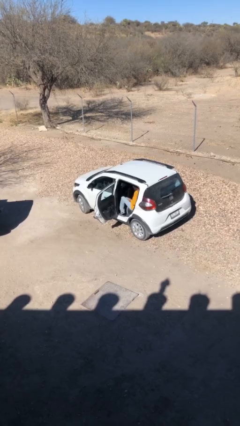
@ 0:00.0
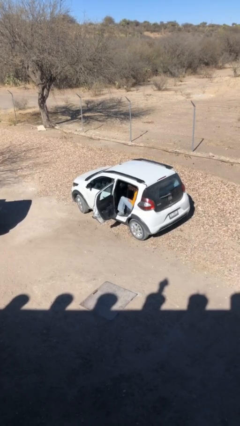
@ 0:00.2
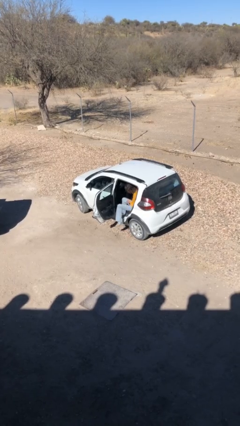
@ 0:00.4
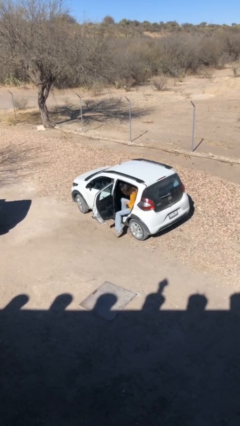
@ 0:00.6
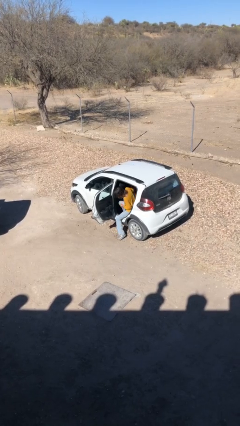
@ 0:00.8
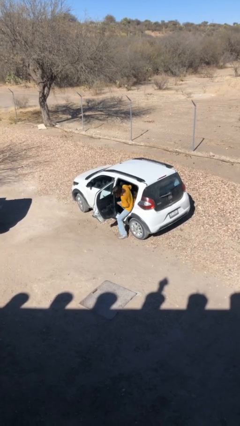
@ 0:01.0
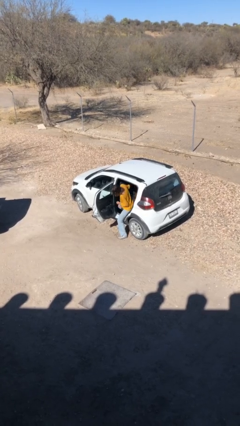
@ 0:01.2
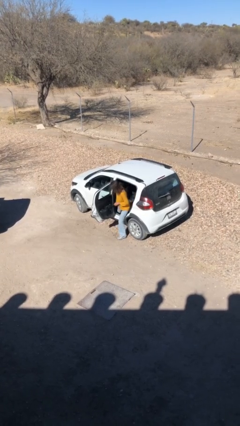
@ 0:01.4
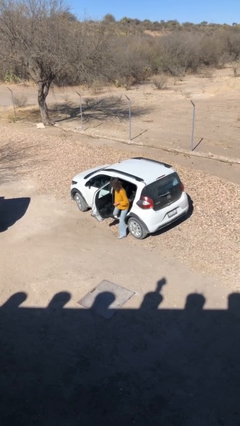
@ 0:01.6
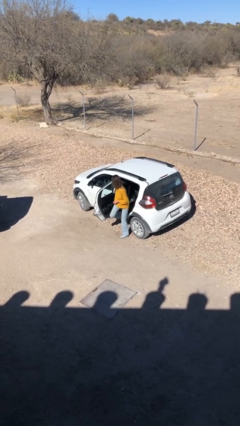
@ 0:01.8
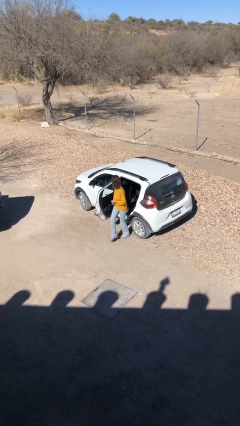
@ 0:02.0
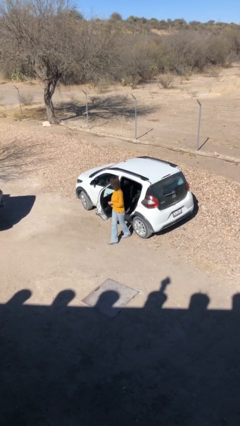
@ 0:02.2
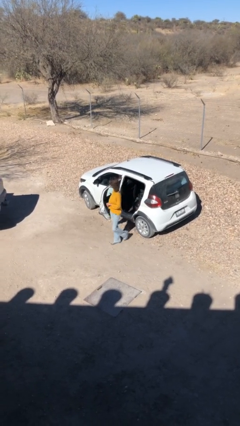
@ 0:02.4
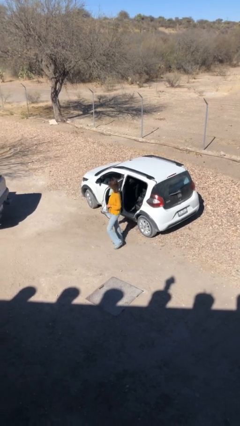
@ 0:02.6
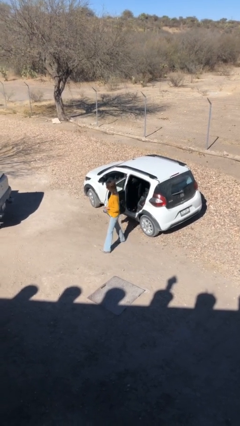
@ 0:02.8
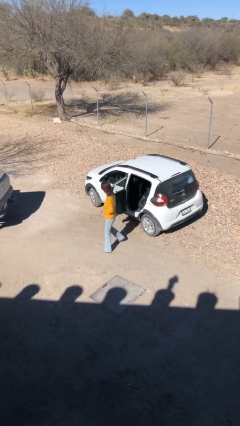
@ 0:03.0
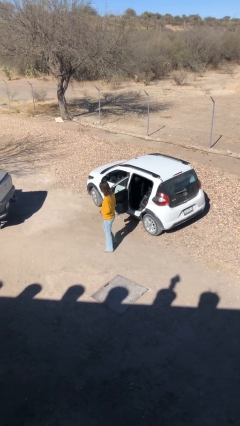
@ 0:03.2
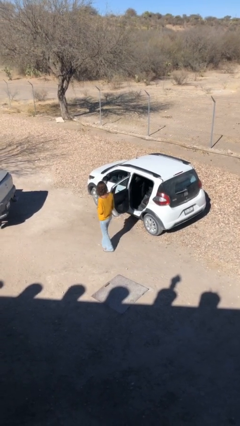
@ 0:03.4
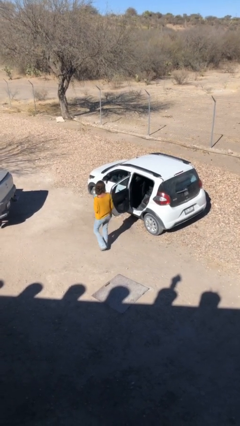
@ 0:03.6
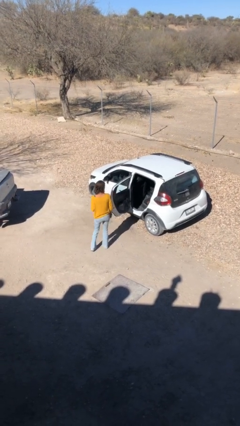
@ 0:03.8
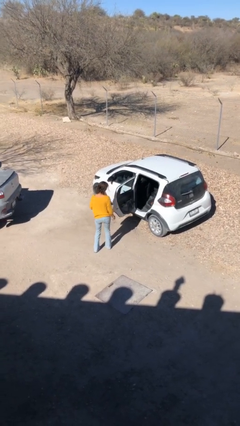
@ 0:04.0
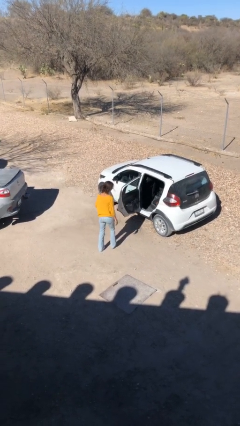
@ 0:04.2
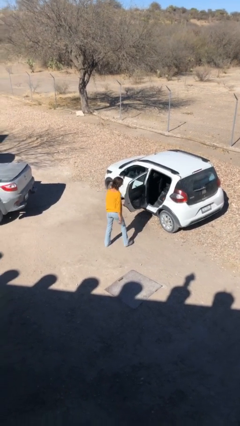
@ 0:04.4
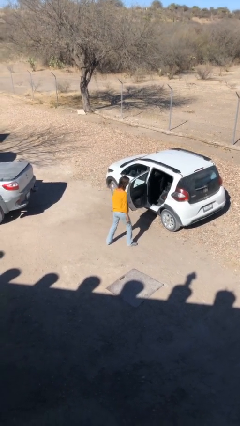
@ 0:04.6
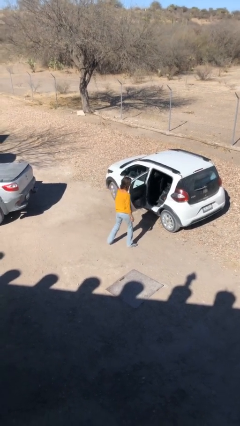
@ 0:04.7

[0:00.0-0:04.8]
person enters car

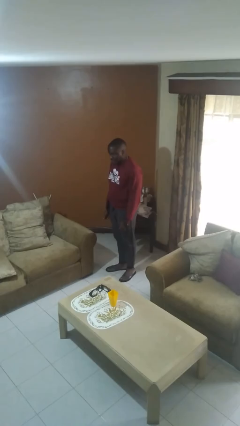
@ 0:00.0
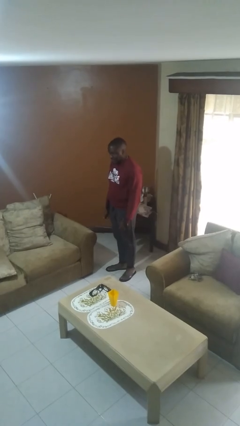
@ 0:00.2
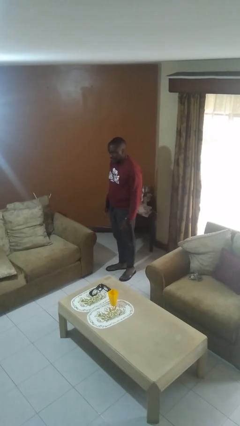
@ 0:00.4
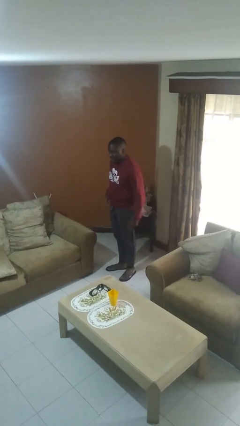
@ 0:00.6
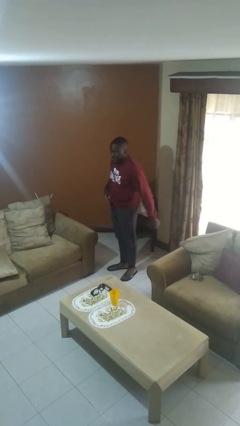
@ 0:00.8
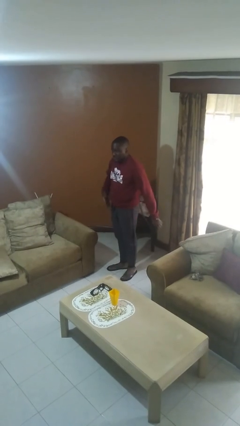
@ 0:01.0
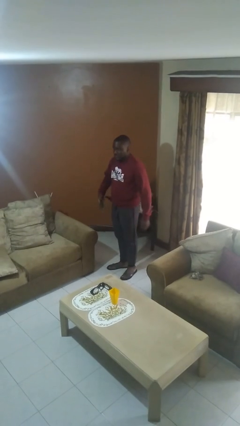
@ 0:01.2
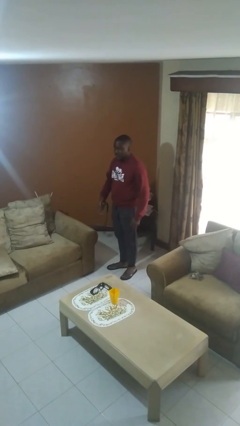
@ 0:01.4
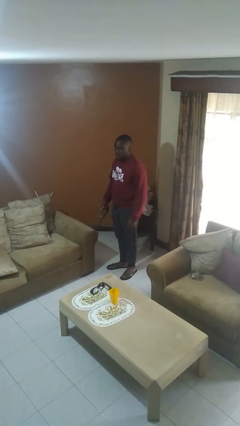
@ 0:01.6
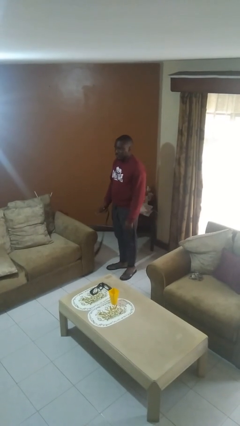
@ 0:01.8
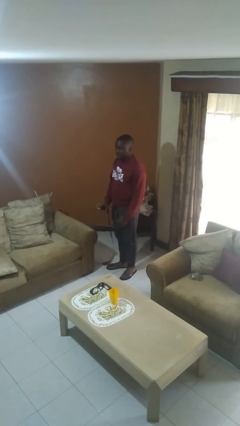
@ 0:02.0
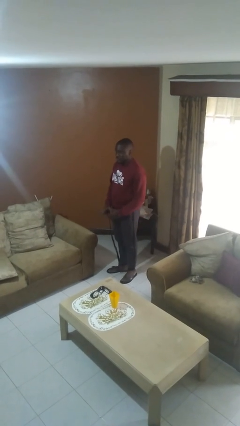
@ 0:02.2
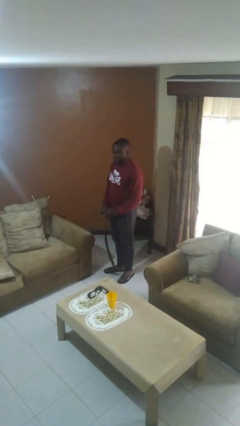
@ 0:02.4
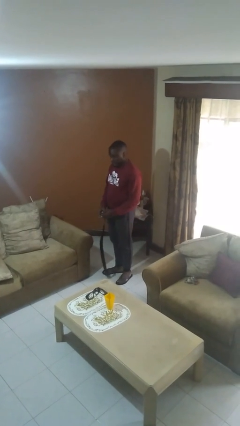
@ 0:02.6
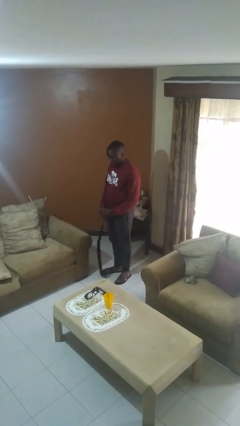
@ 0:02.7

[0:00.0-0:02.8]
person takes off belt

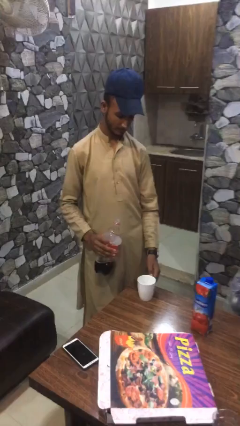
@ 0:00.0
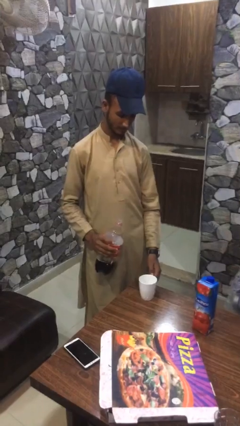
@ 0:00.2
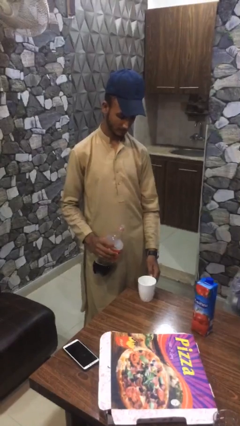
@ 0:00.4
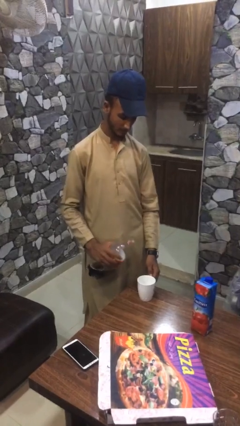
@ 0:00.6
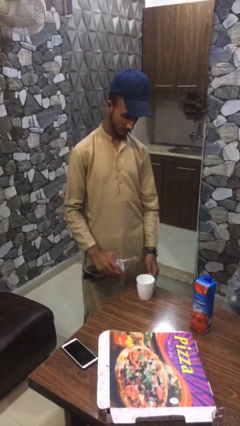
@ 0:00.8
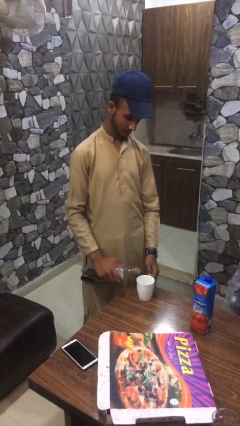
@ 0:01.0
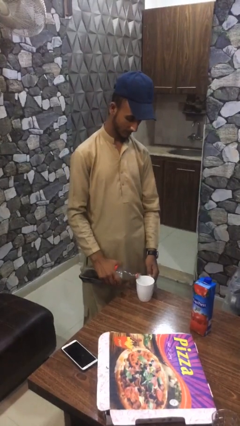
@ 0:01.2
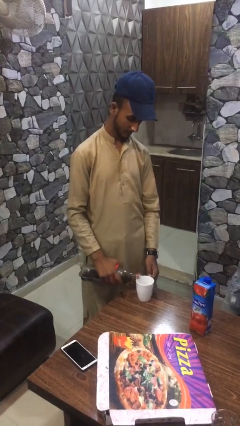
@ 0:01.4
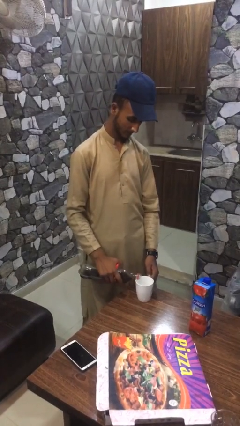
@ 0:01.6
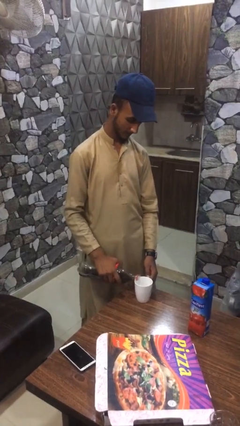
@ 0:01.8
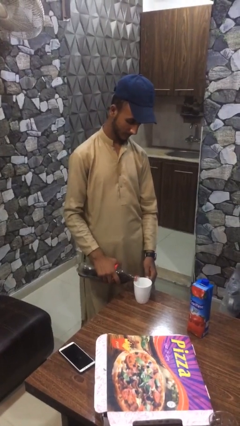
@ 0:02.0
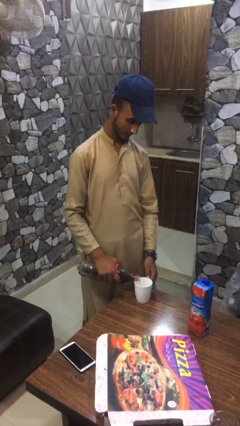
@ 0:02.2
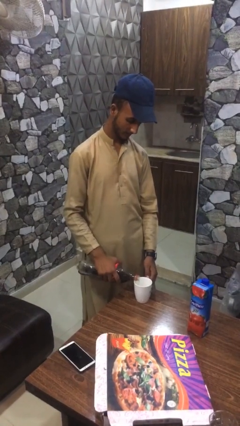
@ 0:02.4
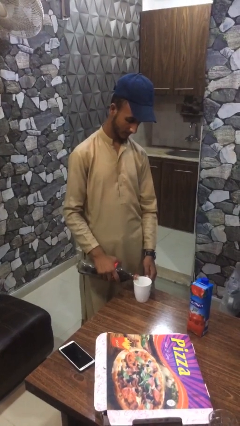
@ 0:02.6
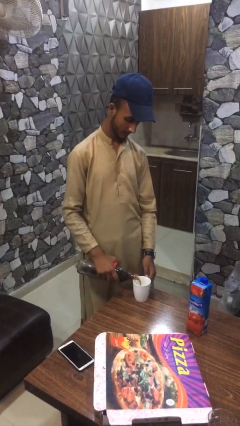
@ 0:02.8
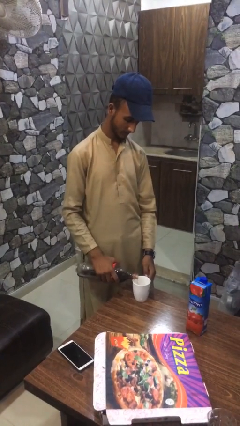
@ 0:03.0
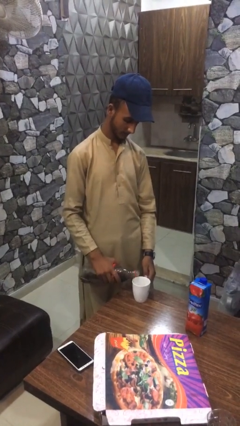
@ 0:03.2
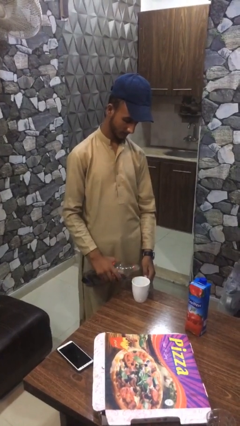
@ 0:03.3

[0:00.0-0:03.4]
person pours coffee into mug

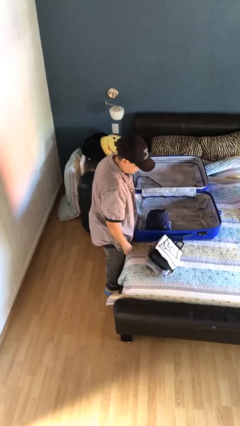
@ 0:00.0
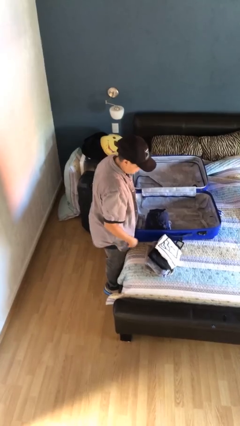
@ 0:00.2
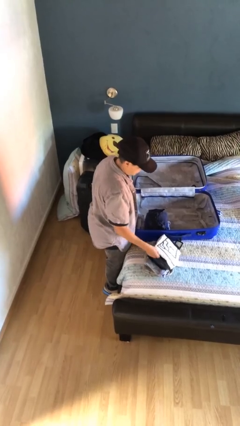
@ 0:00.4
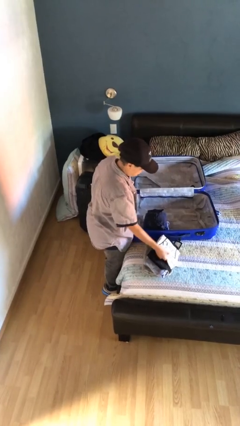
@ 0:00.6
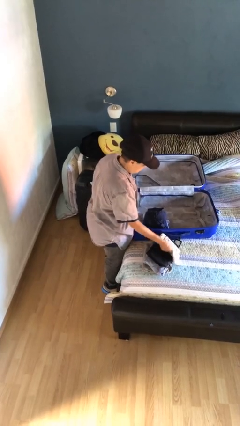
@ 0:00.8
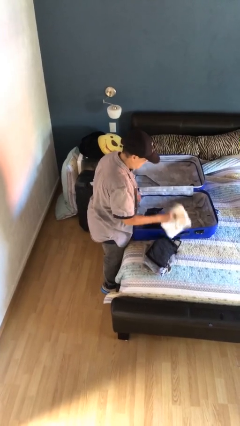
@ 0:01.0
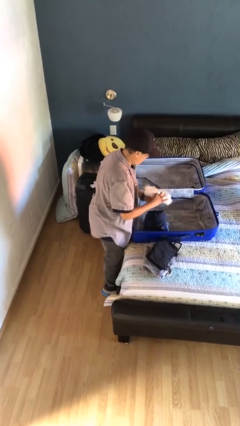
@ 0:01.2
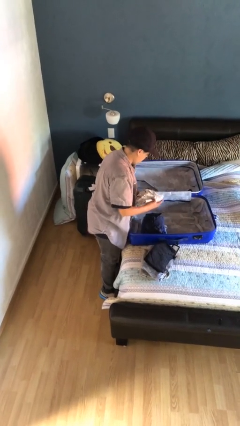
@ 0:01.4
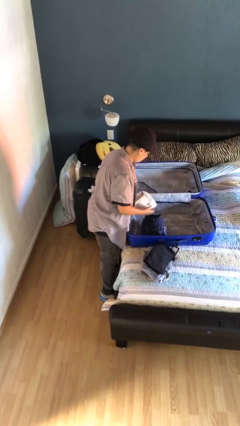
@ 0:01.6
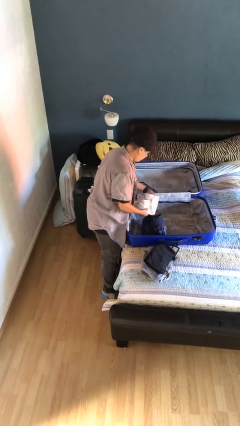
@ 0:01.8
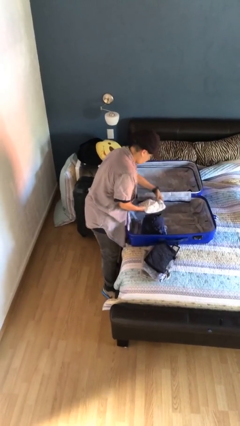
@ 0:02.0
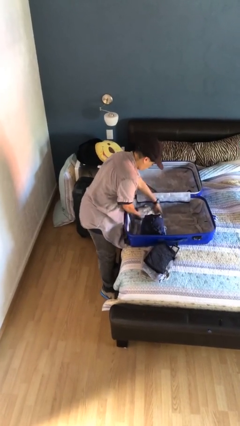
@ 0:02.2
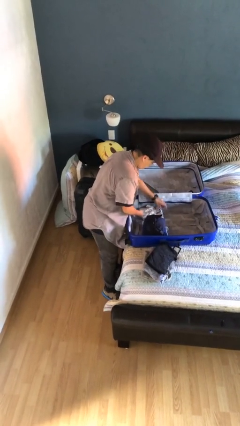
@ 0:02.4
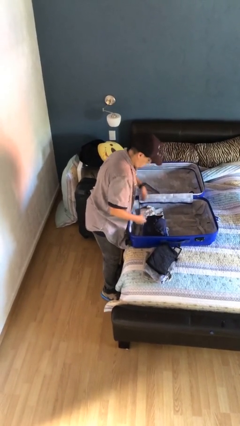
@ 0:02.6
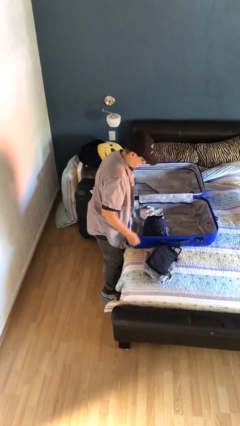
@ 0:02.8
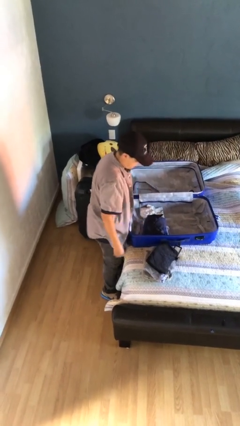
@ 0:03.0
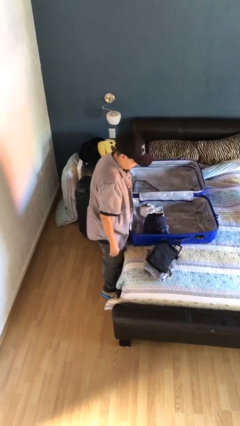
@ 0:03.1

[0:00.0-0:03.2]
person loads clothes into suitcase

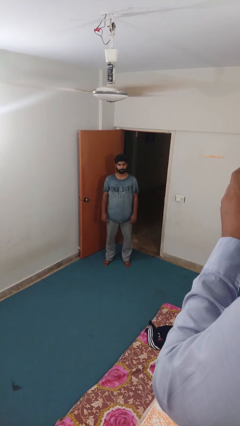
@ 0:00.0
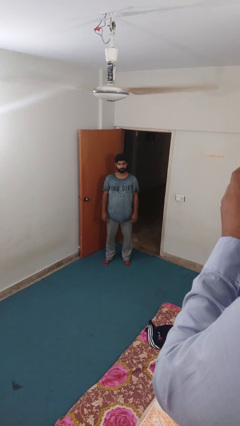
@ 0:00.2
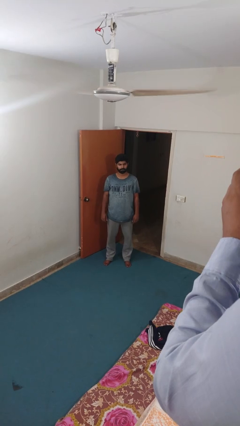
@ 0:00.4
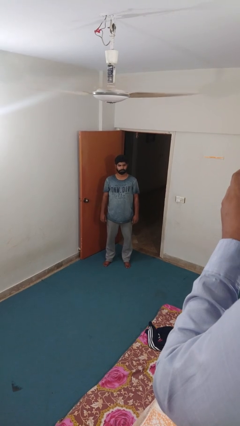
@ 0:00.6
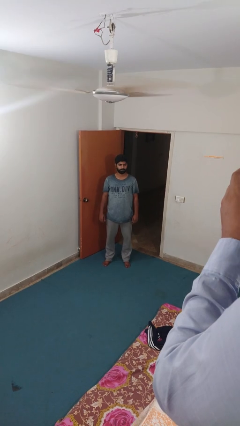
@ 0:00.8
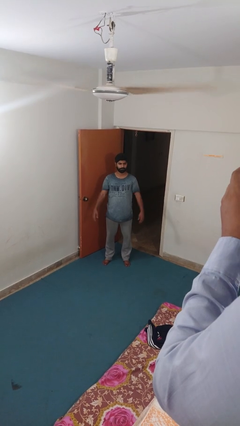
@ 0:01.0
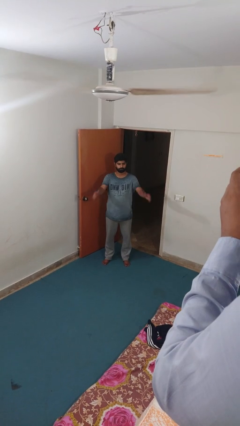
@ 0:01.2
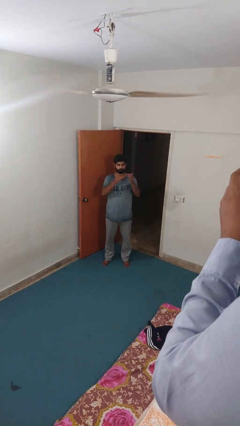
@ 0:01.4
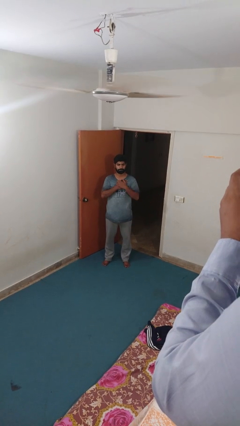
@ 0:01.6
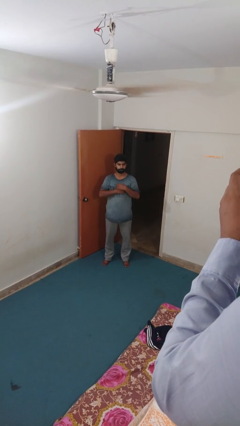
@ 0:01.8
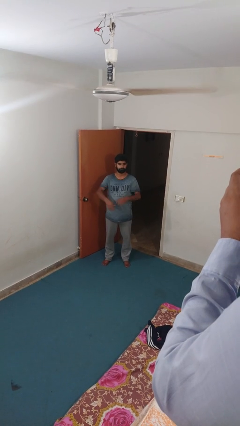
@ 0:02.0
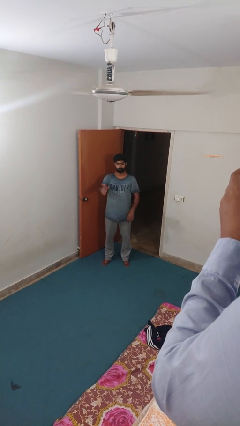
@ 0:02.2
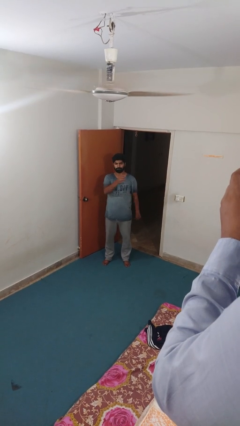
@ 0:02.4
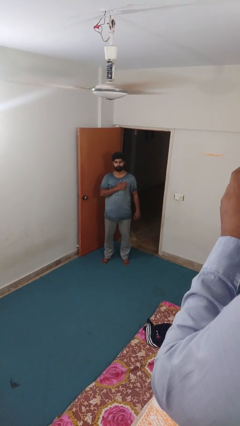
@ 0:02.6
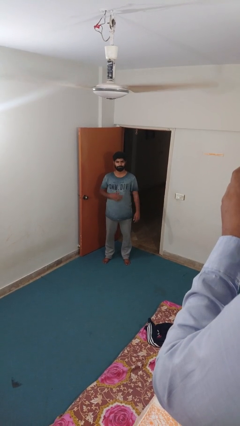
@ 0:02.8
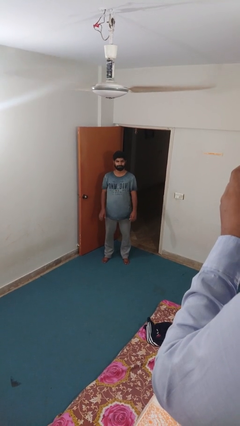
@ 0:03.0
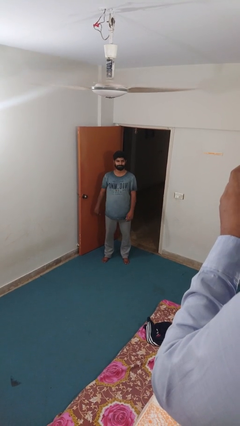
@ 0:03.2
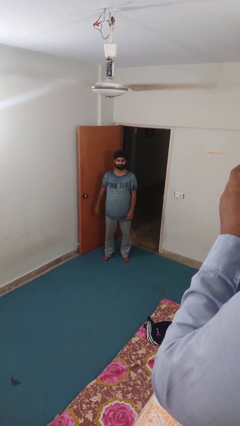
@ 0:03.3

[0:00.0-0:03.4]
person drums on chest
